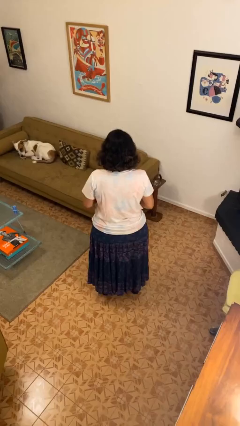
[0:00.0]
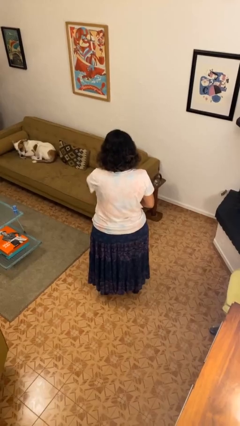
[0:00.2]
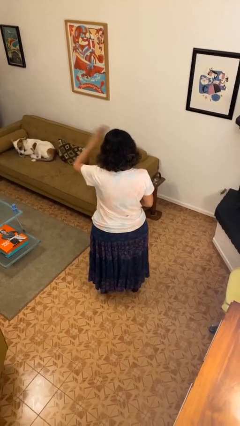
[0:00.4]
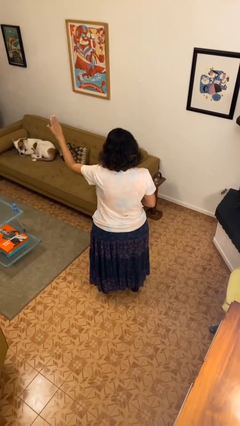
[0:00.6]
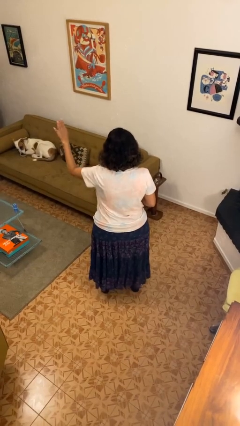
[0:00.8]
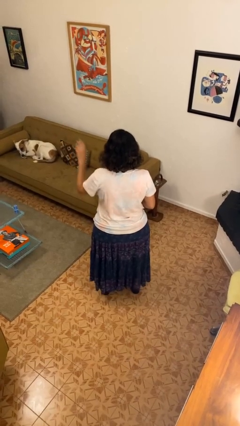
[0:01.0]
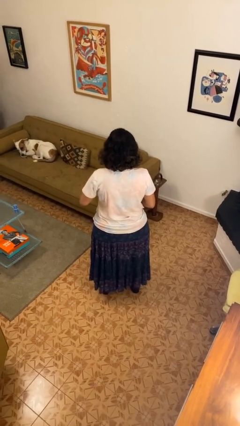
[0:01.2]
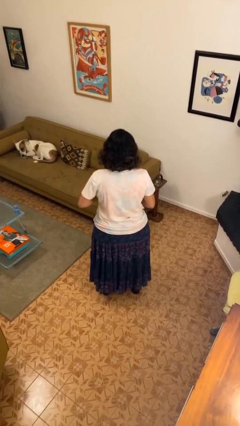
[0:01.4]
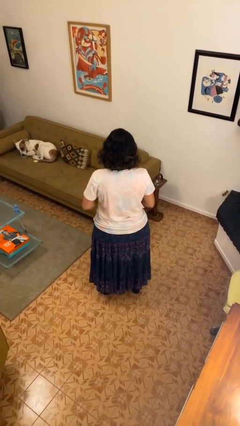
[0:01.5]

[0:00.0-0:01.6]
person gestures swipe left

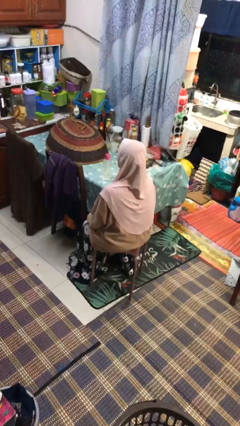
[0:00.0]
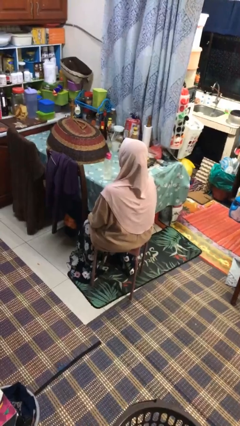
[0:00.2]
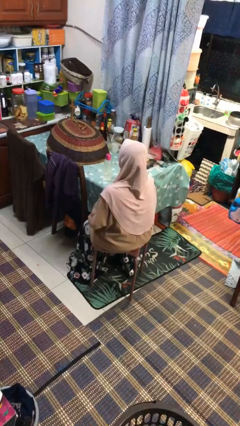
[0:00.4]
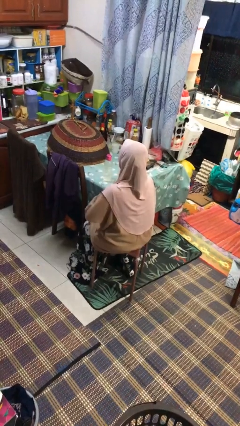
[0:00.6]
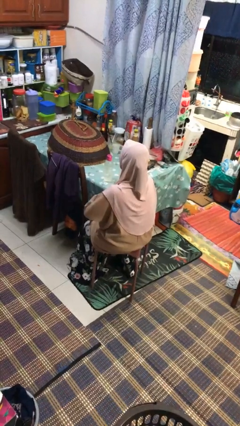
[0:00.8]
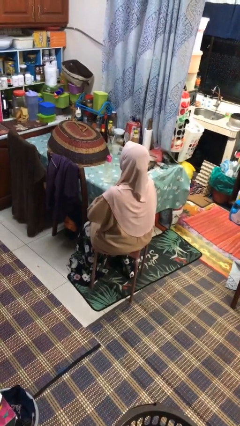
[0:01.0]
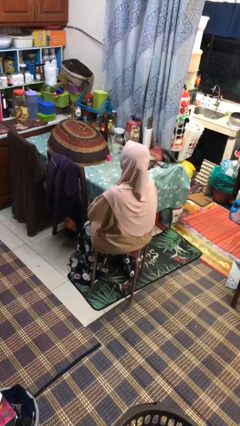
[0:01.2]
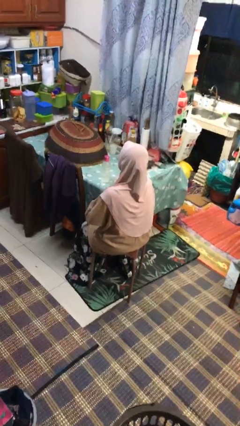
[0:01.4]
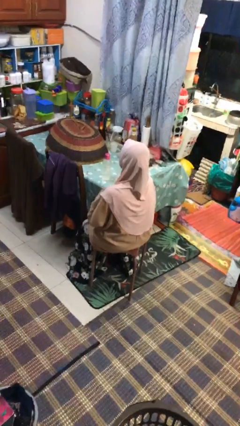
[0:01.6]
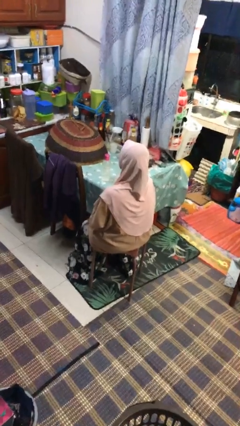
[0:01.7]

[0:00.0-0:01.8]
person drums on chest

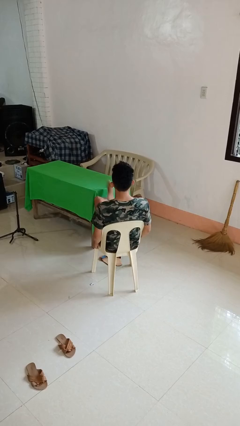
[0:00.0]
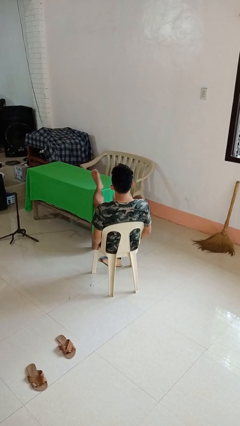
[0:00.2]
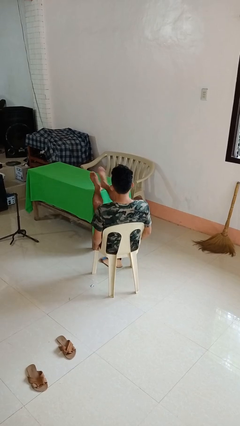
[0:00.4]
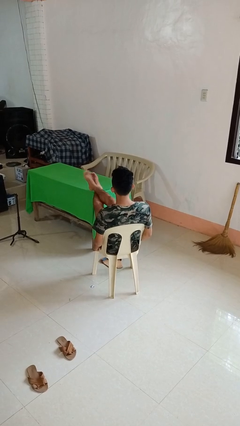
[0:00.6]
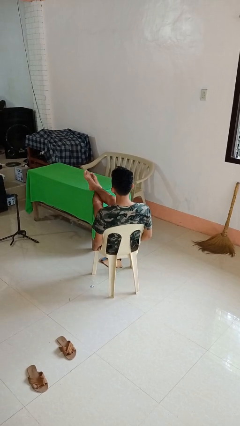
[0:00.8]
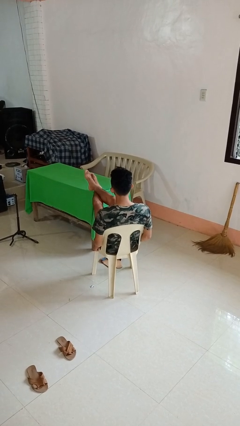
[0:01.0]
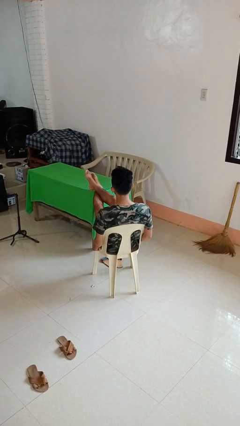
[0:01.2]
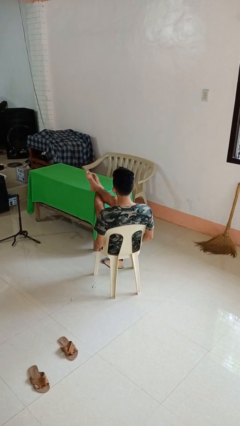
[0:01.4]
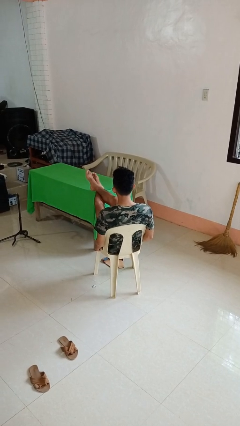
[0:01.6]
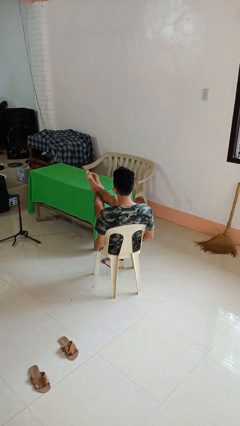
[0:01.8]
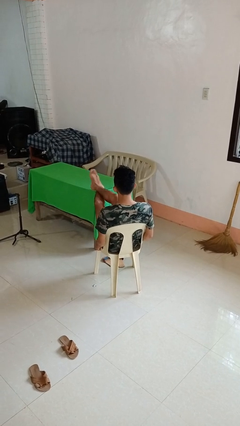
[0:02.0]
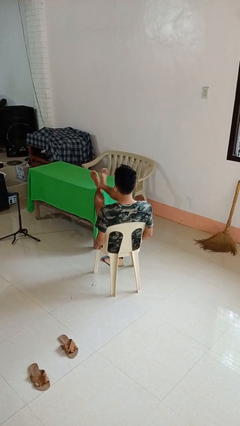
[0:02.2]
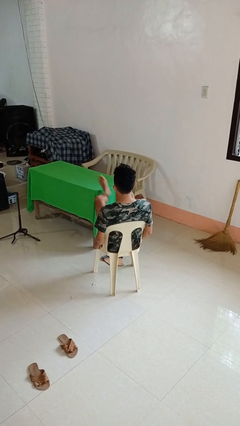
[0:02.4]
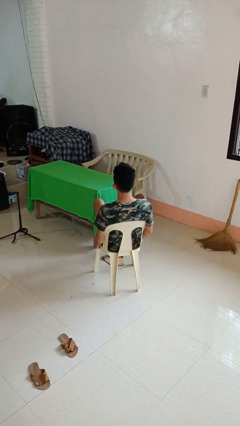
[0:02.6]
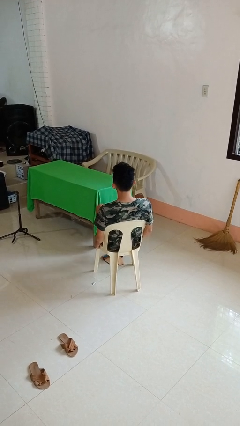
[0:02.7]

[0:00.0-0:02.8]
person puts feet up

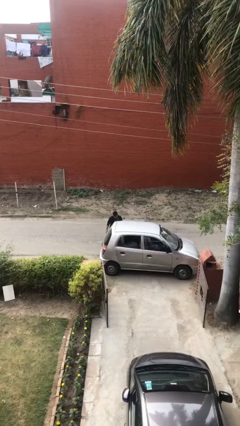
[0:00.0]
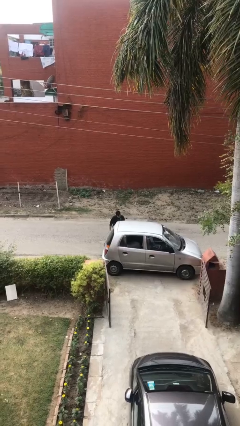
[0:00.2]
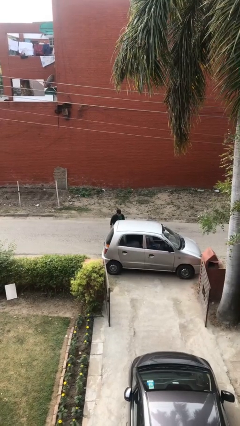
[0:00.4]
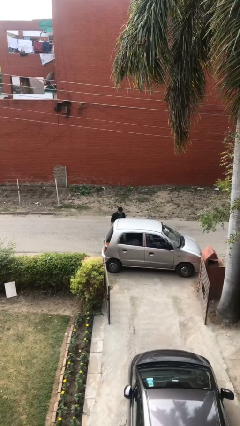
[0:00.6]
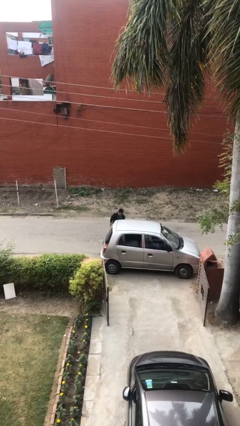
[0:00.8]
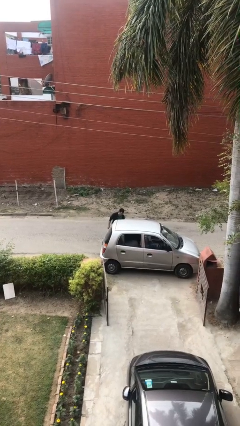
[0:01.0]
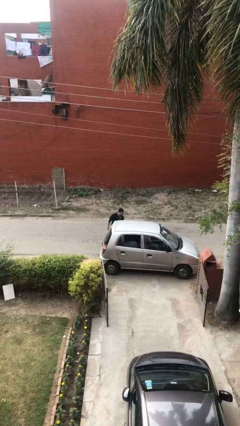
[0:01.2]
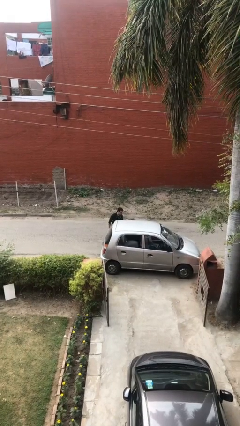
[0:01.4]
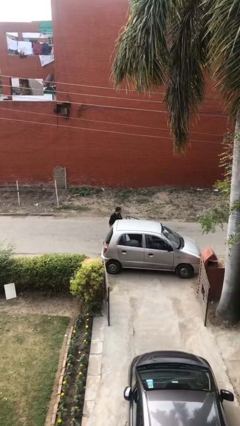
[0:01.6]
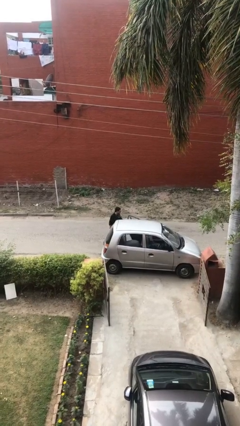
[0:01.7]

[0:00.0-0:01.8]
person opens car door

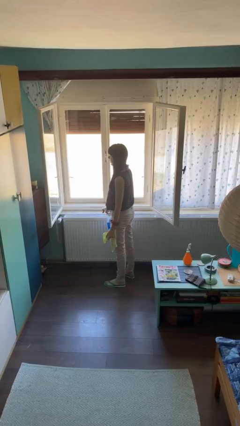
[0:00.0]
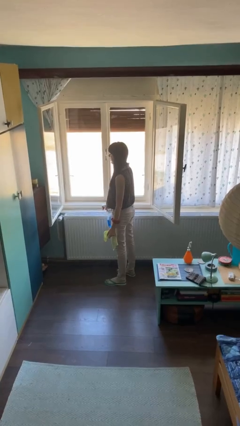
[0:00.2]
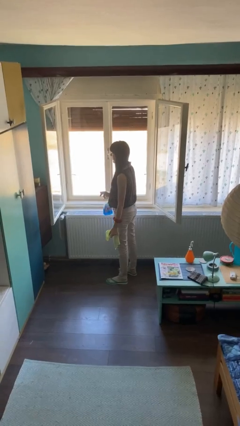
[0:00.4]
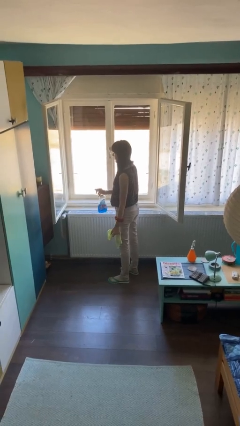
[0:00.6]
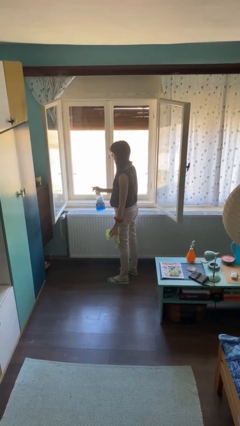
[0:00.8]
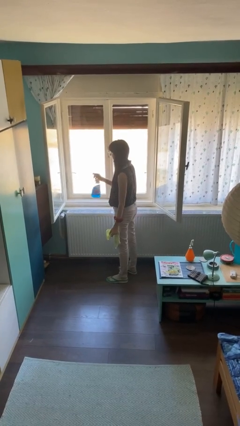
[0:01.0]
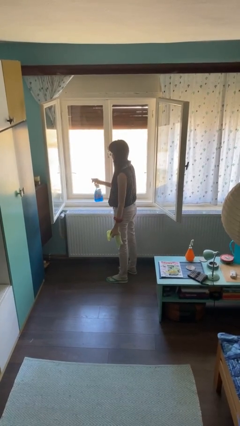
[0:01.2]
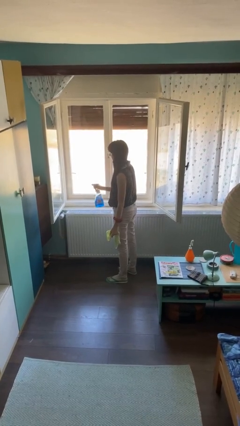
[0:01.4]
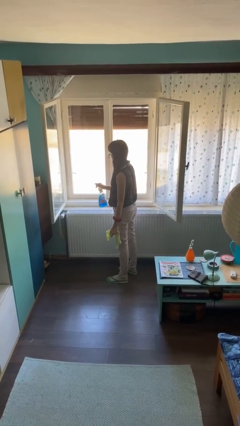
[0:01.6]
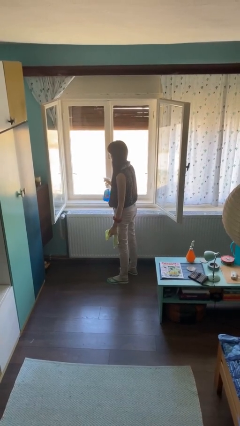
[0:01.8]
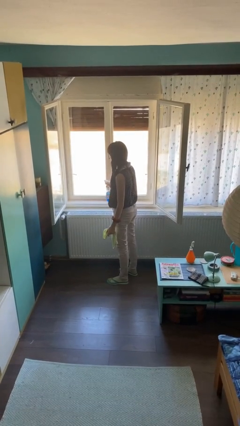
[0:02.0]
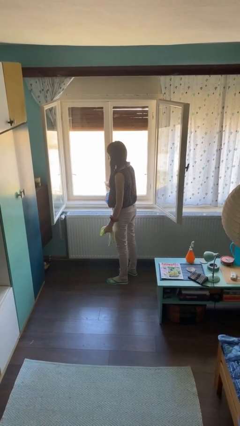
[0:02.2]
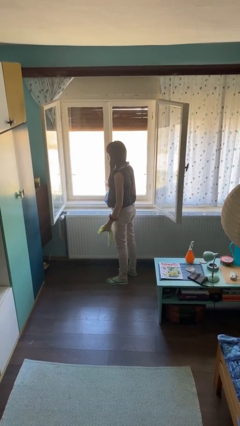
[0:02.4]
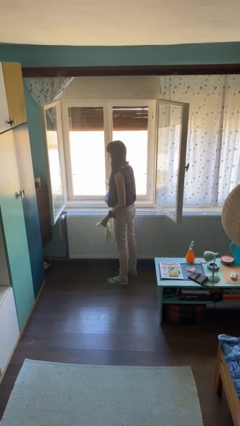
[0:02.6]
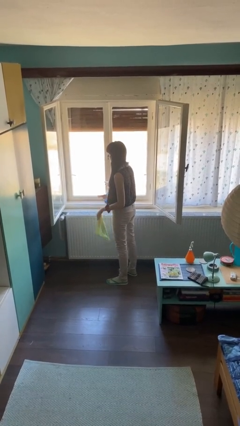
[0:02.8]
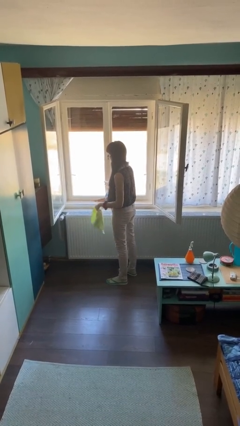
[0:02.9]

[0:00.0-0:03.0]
person sprays from bottle

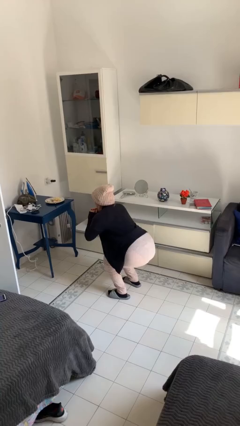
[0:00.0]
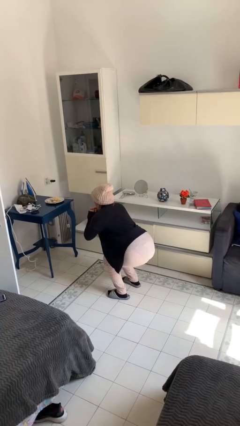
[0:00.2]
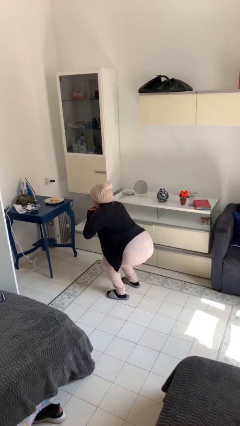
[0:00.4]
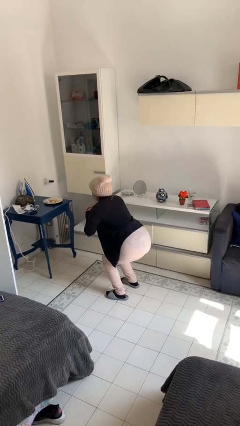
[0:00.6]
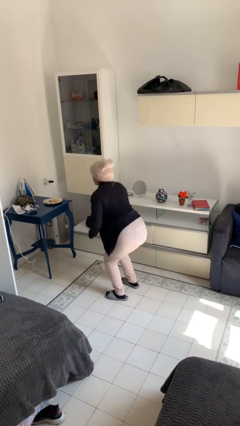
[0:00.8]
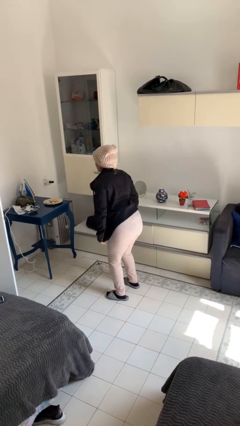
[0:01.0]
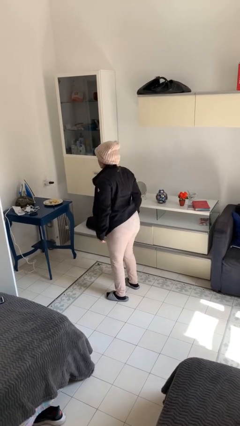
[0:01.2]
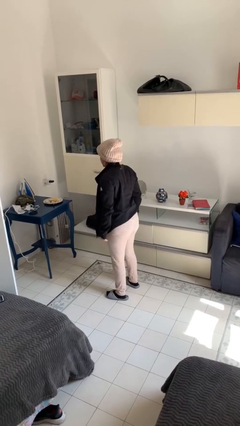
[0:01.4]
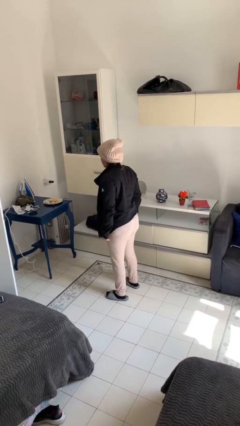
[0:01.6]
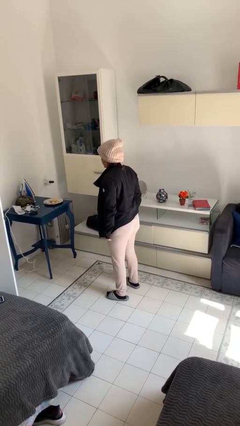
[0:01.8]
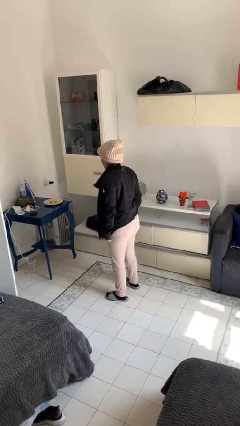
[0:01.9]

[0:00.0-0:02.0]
person stands up

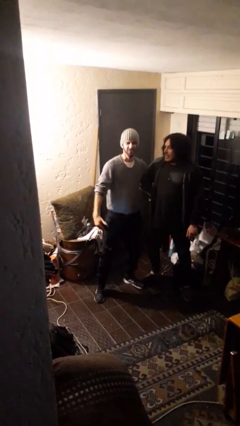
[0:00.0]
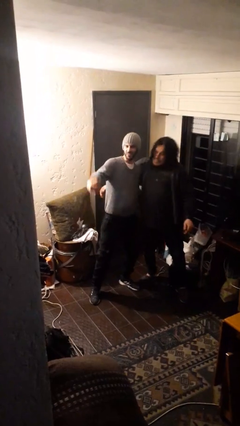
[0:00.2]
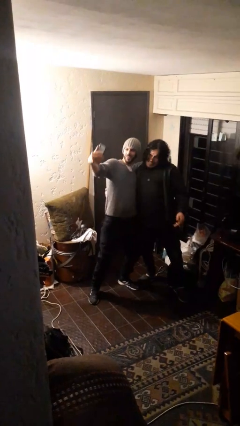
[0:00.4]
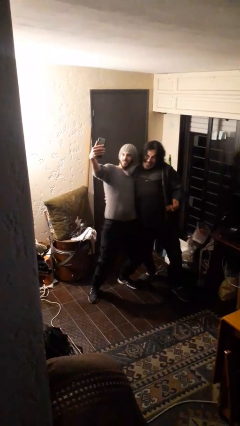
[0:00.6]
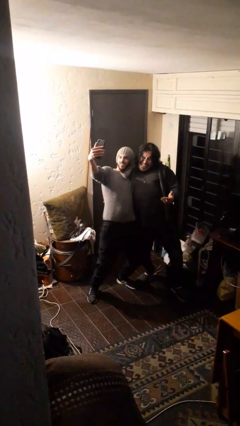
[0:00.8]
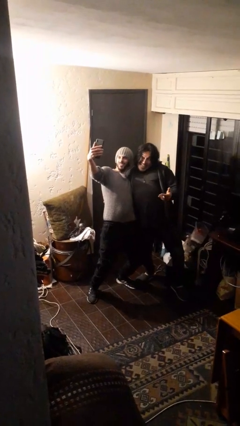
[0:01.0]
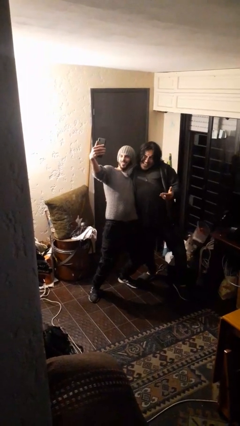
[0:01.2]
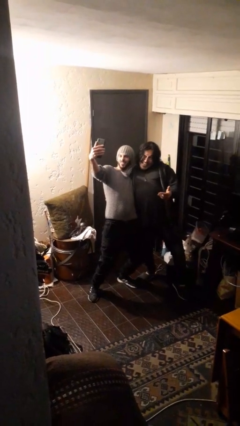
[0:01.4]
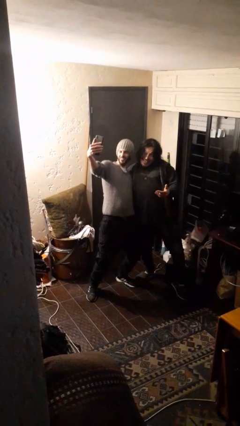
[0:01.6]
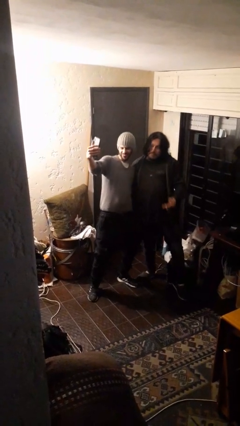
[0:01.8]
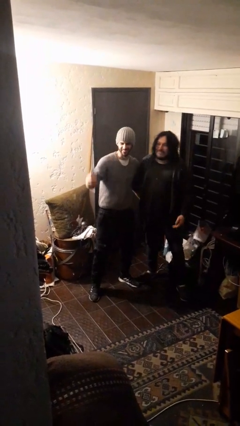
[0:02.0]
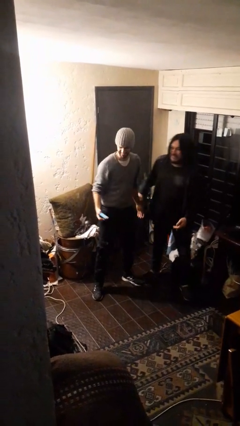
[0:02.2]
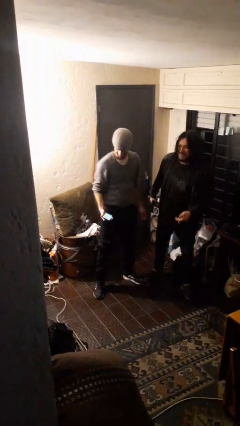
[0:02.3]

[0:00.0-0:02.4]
person takes selfie with person

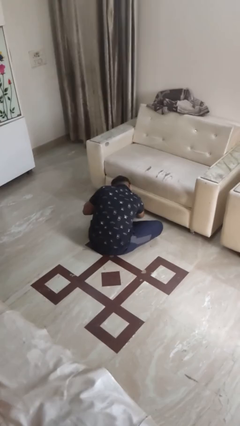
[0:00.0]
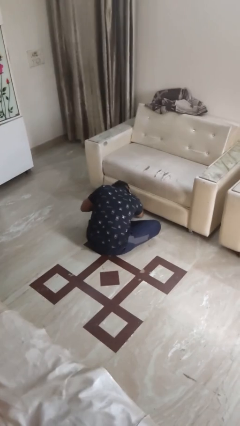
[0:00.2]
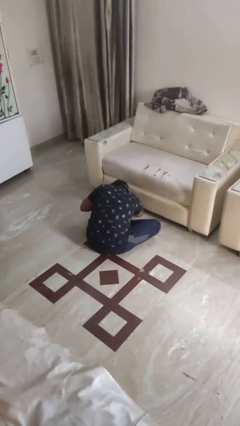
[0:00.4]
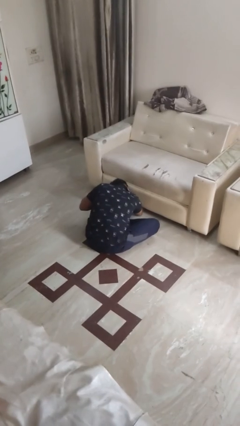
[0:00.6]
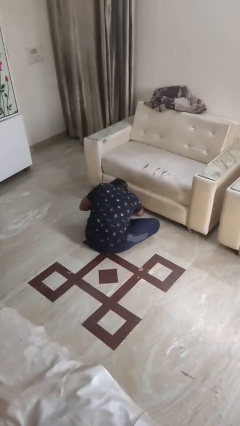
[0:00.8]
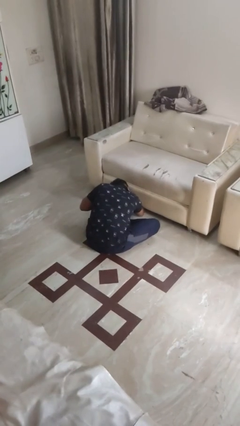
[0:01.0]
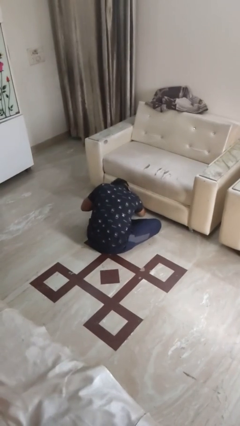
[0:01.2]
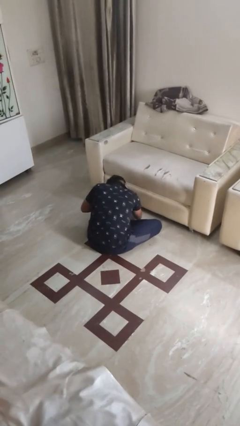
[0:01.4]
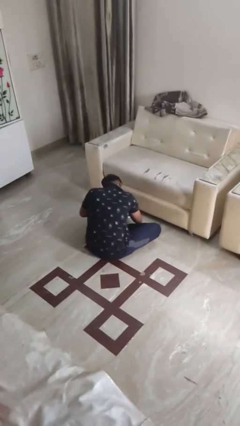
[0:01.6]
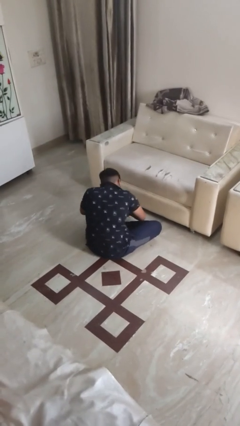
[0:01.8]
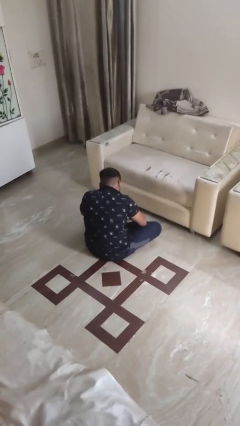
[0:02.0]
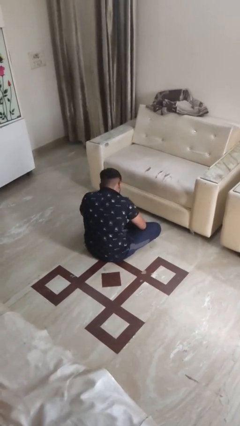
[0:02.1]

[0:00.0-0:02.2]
person searches under couch
